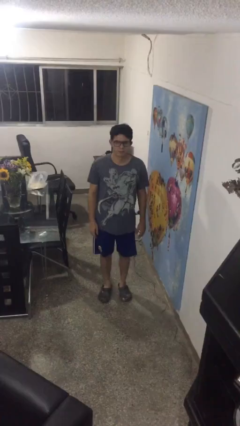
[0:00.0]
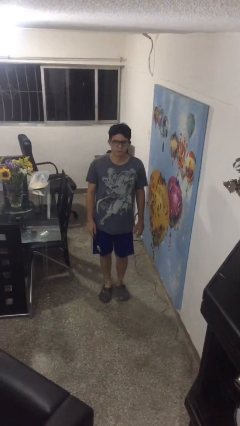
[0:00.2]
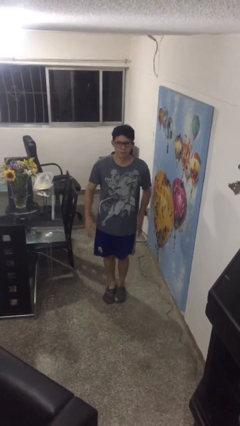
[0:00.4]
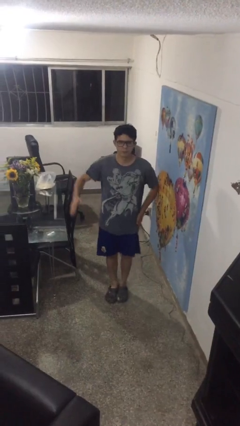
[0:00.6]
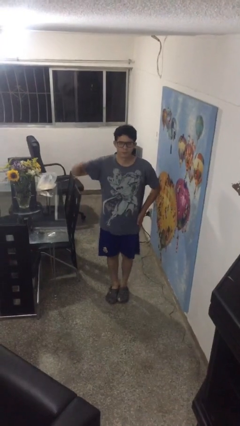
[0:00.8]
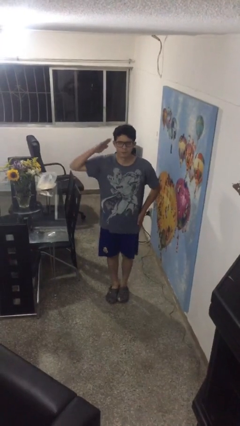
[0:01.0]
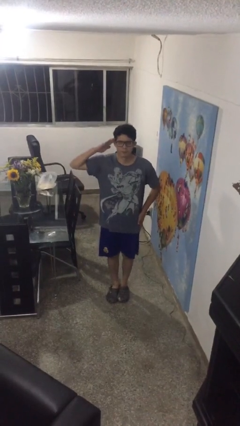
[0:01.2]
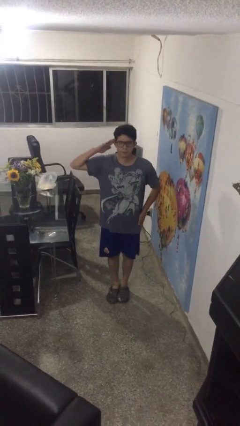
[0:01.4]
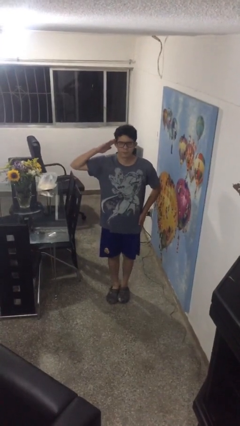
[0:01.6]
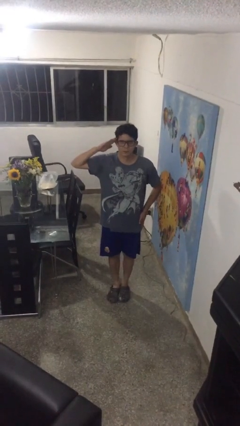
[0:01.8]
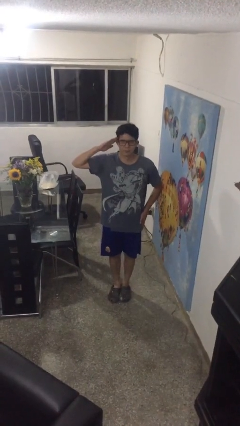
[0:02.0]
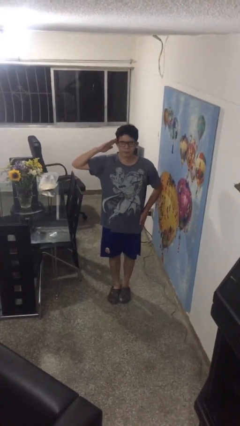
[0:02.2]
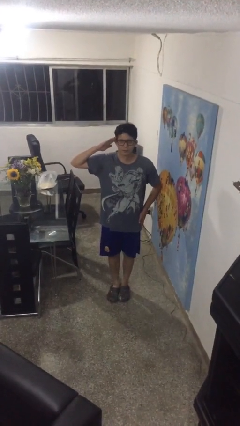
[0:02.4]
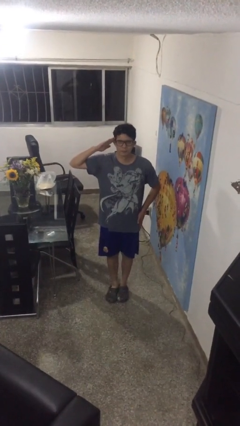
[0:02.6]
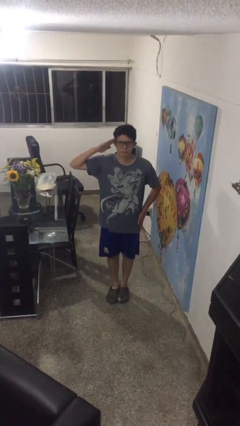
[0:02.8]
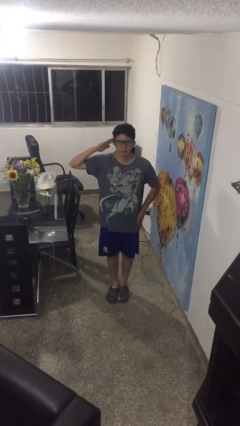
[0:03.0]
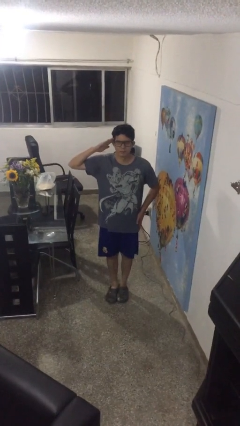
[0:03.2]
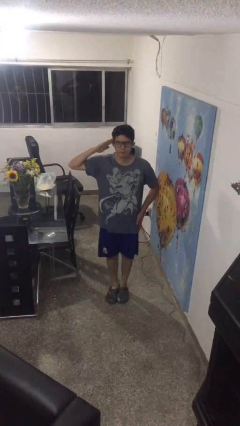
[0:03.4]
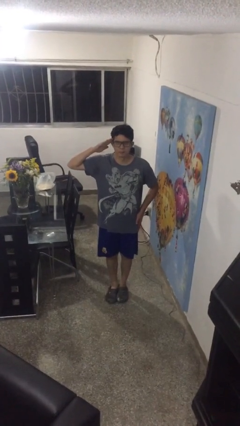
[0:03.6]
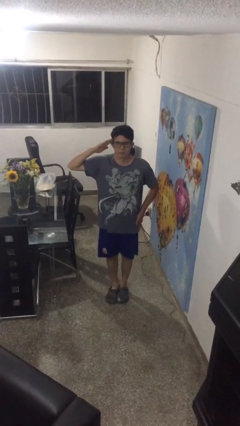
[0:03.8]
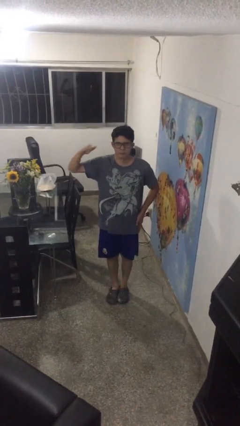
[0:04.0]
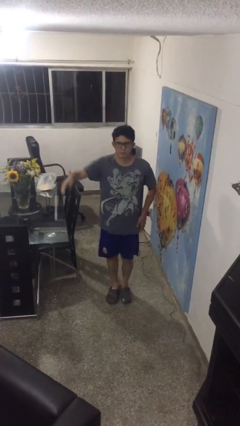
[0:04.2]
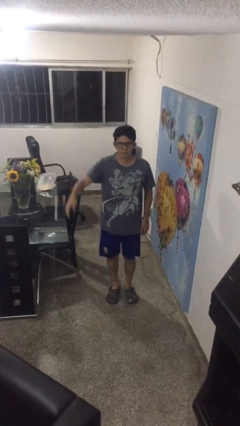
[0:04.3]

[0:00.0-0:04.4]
person salutes

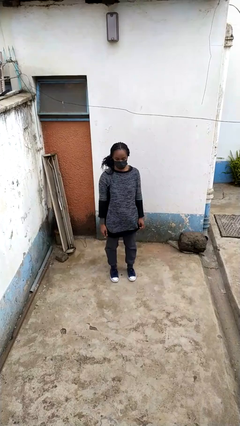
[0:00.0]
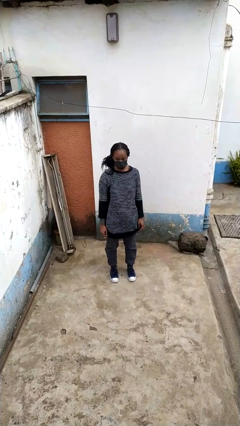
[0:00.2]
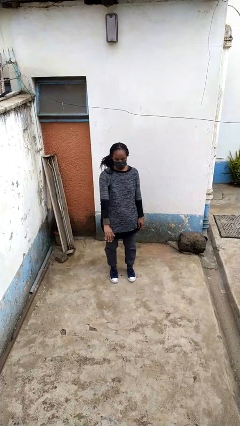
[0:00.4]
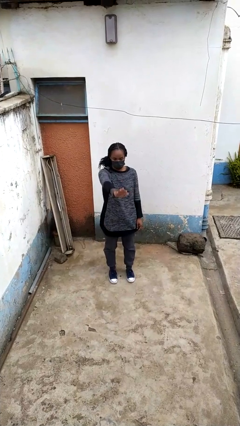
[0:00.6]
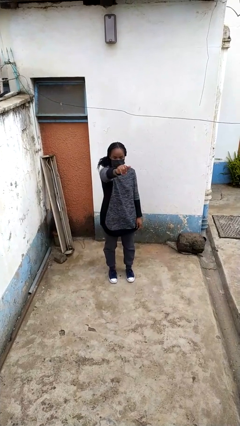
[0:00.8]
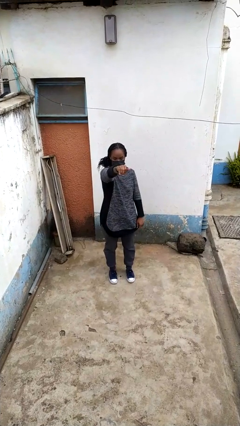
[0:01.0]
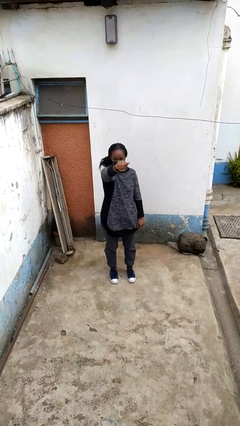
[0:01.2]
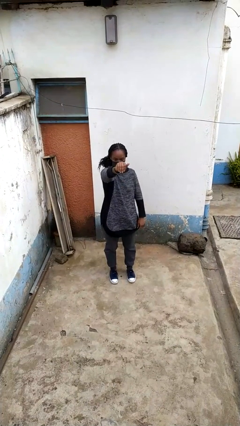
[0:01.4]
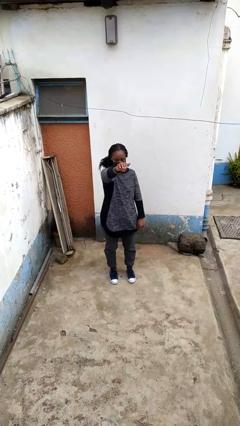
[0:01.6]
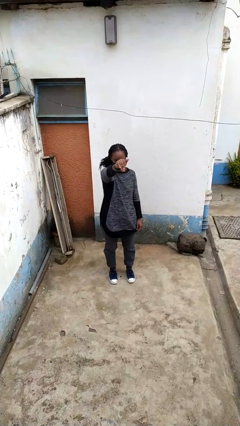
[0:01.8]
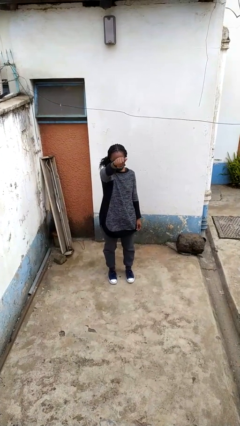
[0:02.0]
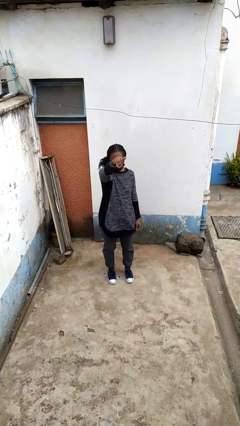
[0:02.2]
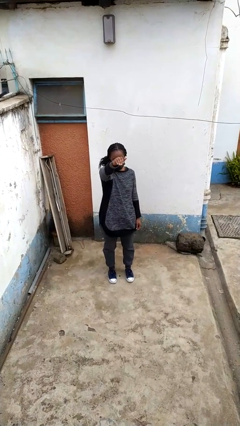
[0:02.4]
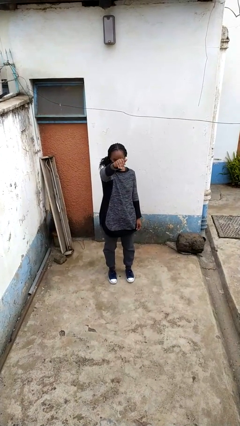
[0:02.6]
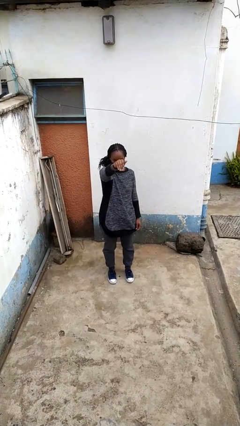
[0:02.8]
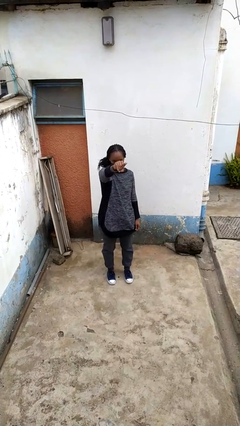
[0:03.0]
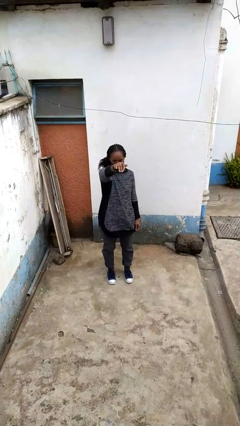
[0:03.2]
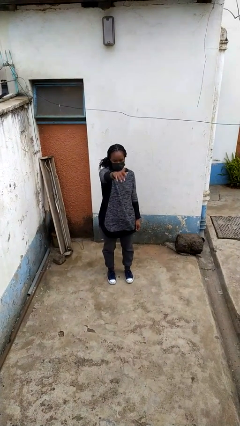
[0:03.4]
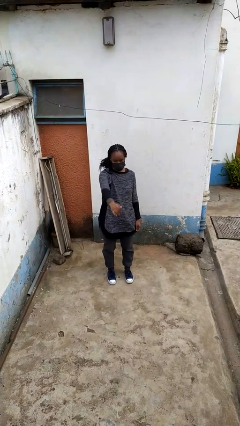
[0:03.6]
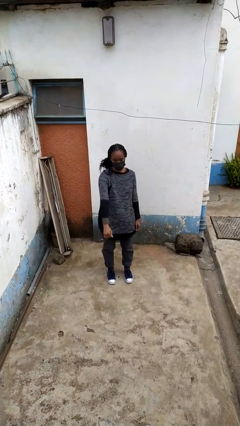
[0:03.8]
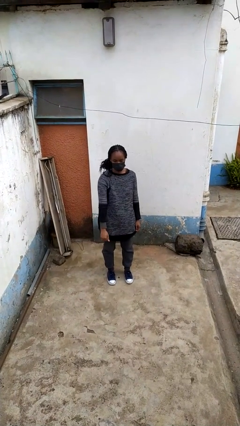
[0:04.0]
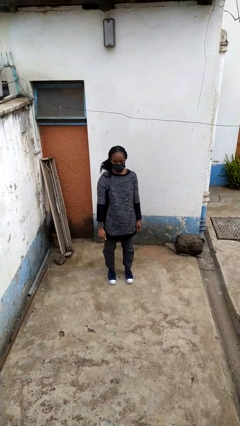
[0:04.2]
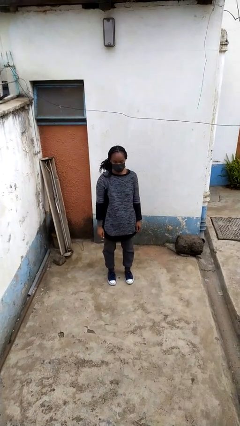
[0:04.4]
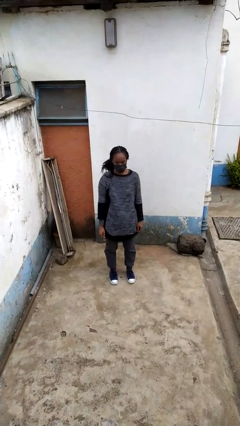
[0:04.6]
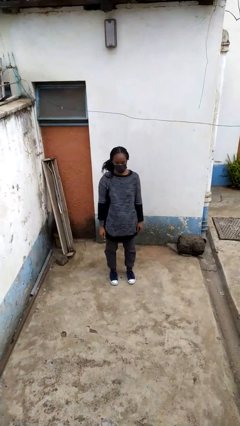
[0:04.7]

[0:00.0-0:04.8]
person gestures come here

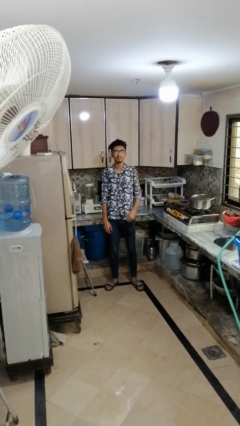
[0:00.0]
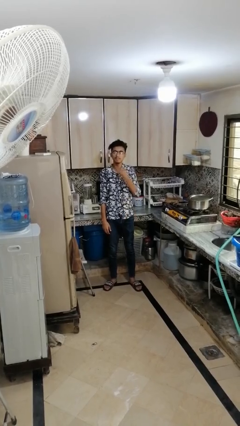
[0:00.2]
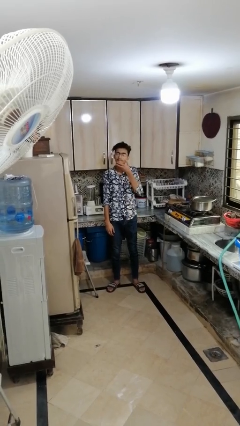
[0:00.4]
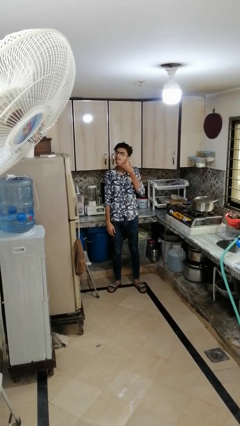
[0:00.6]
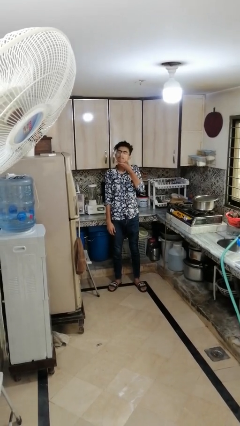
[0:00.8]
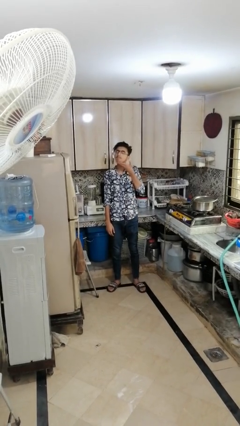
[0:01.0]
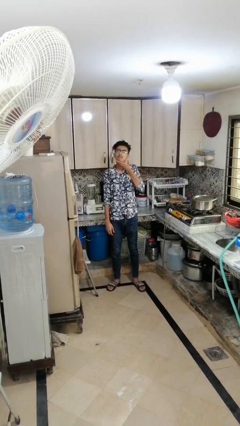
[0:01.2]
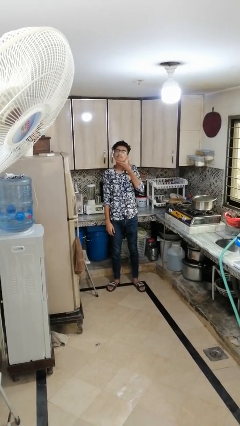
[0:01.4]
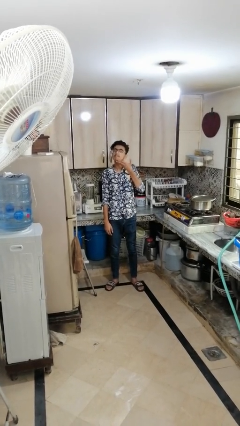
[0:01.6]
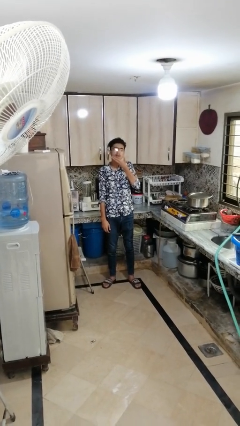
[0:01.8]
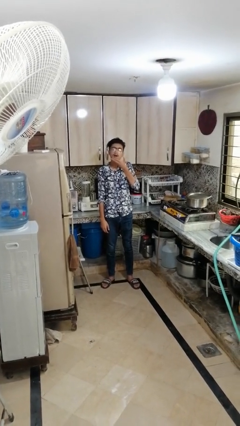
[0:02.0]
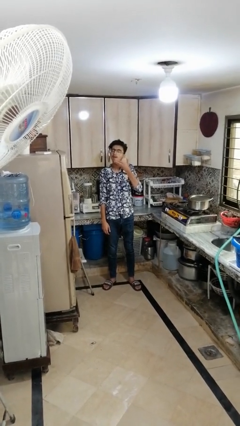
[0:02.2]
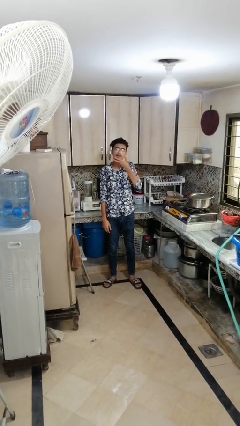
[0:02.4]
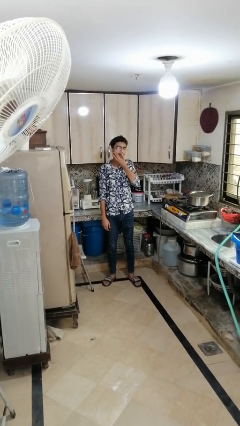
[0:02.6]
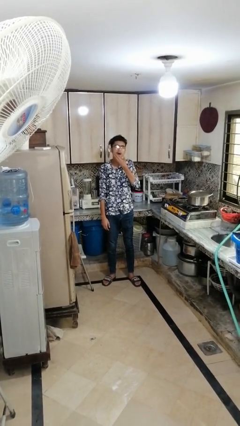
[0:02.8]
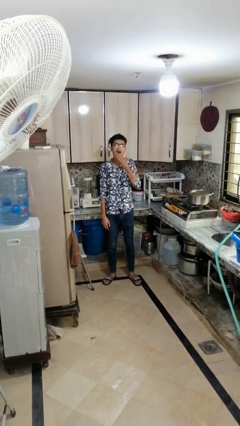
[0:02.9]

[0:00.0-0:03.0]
person strokes chin

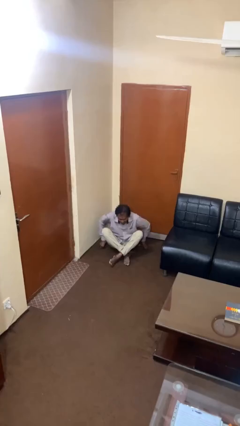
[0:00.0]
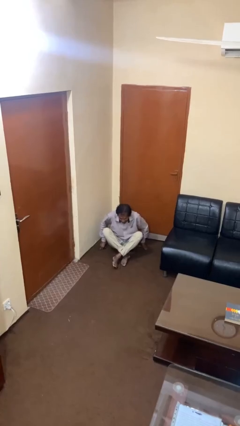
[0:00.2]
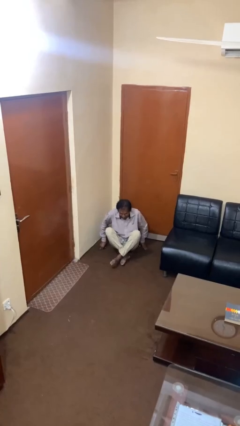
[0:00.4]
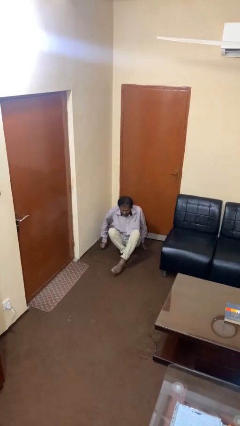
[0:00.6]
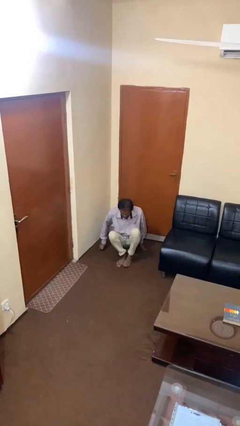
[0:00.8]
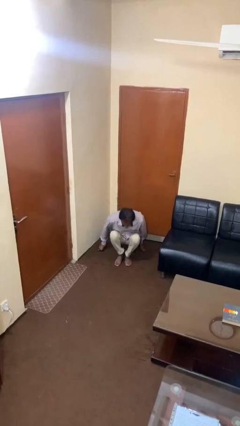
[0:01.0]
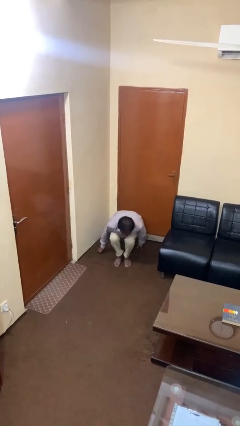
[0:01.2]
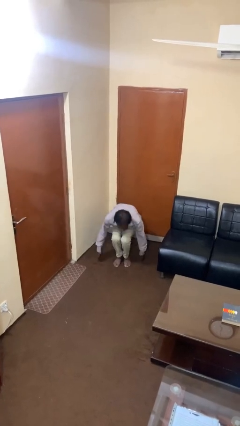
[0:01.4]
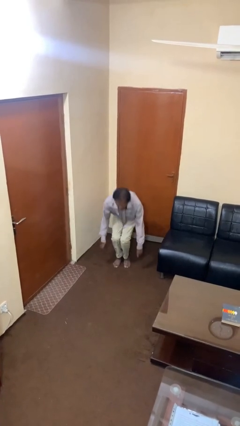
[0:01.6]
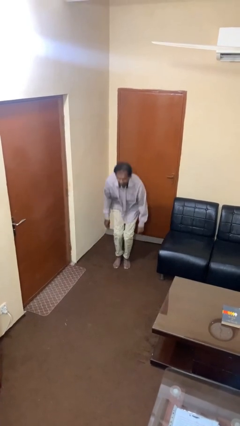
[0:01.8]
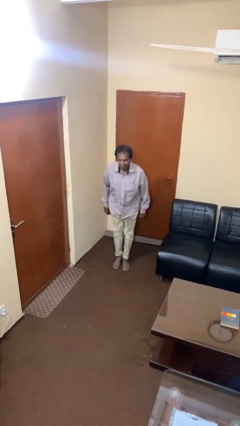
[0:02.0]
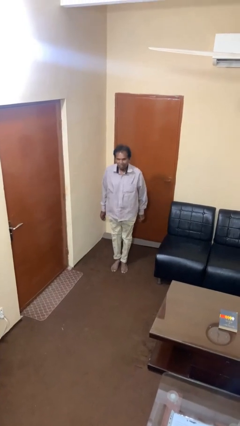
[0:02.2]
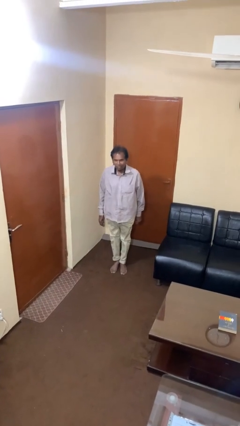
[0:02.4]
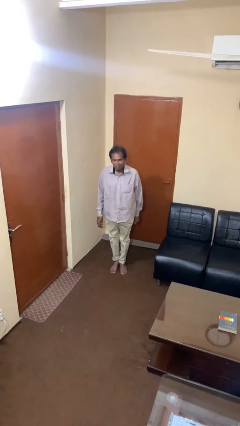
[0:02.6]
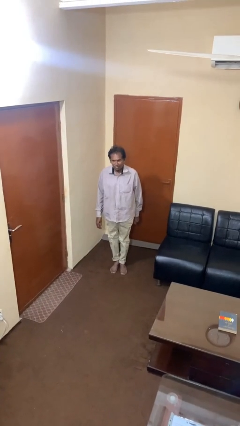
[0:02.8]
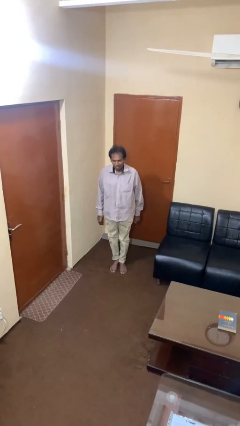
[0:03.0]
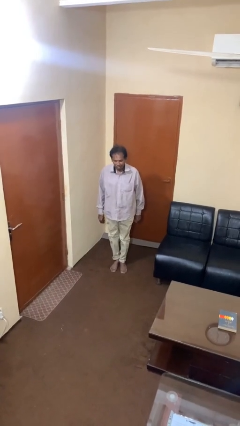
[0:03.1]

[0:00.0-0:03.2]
person stands up from floor

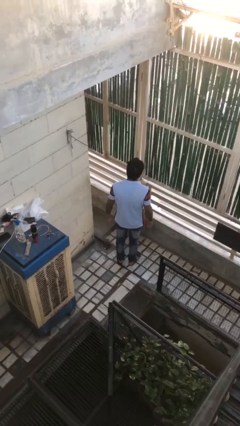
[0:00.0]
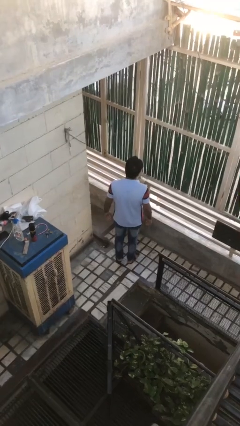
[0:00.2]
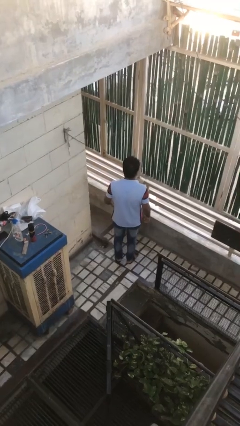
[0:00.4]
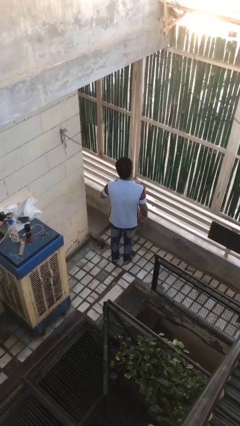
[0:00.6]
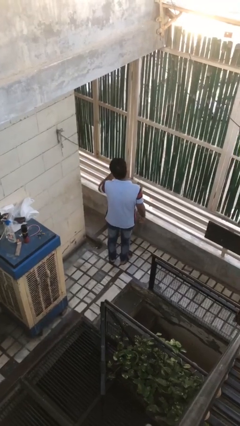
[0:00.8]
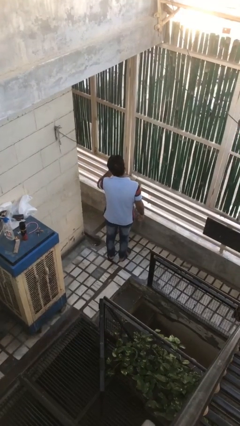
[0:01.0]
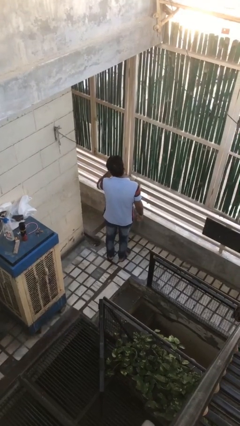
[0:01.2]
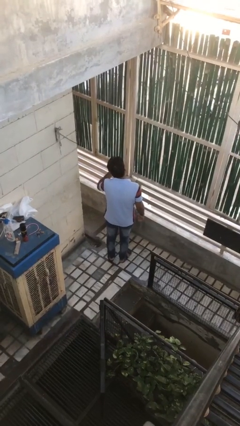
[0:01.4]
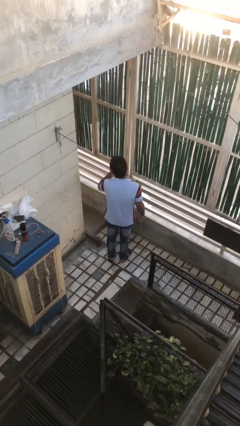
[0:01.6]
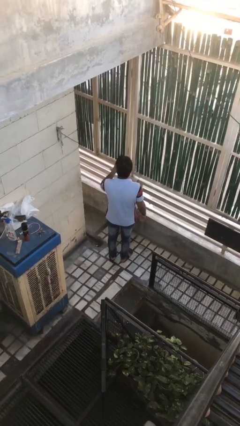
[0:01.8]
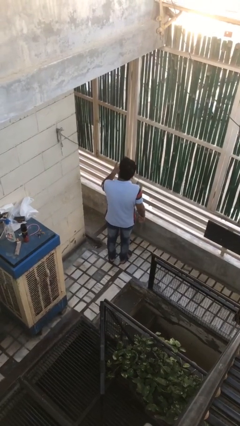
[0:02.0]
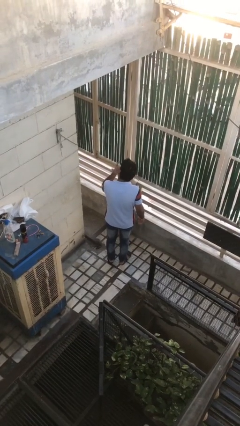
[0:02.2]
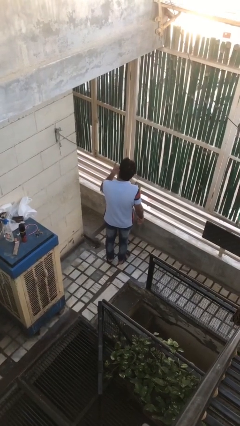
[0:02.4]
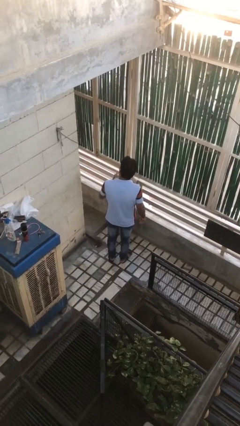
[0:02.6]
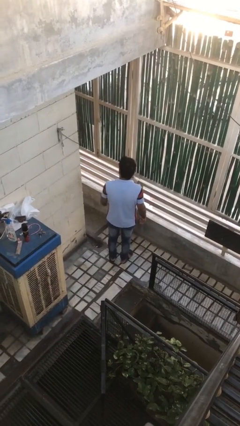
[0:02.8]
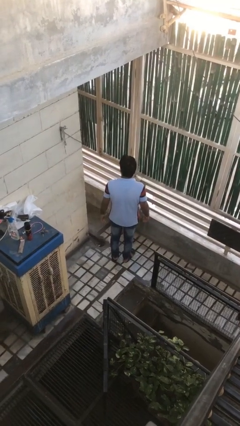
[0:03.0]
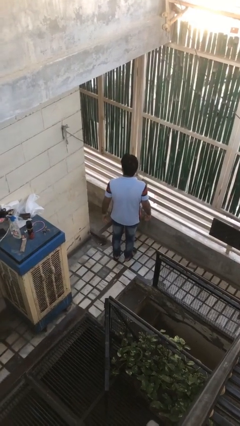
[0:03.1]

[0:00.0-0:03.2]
person licks fingers
